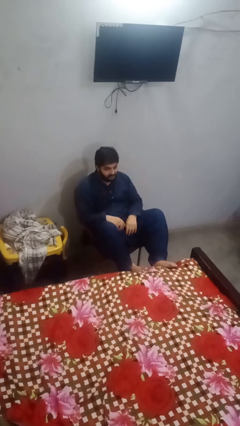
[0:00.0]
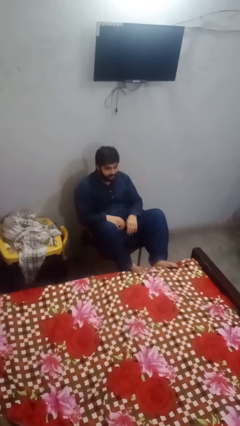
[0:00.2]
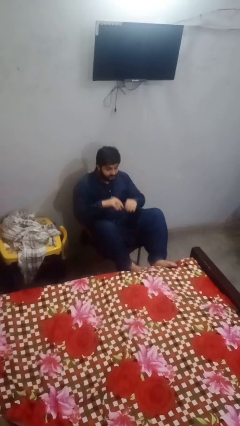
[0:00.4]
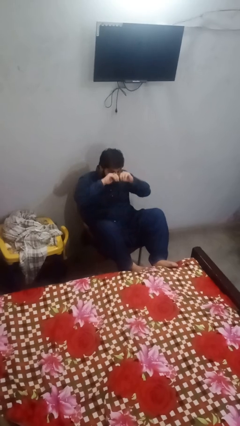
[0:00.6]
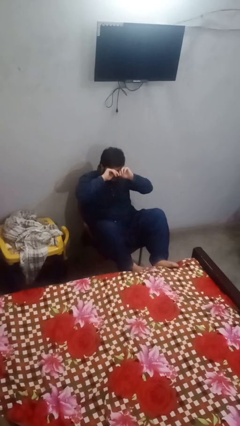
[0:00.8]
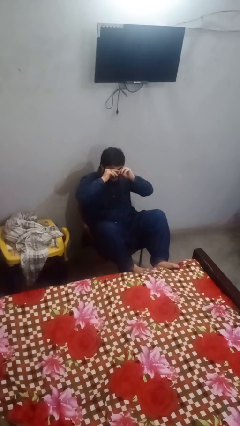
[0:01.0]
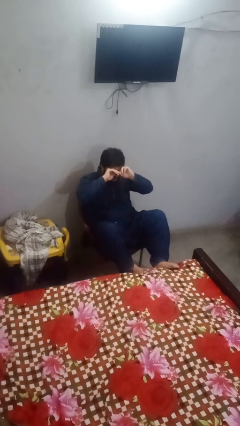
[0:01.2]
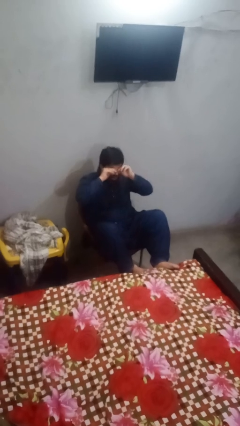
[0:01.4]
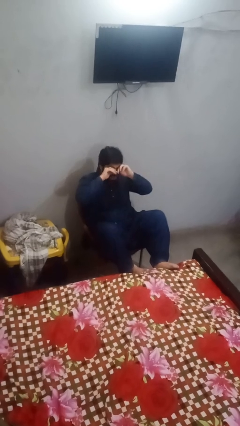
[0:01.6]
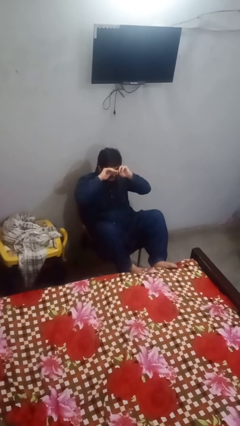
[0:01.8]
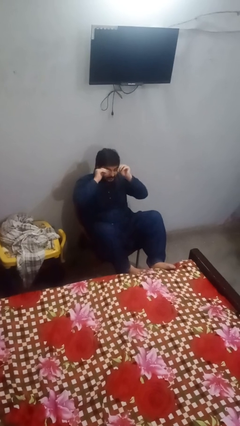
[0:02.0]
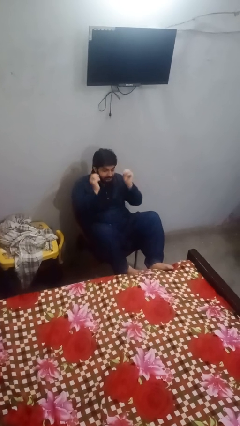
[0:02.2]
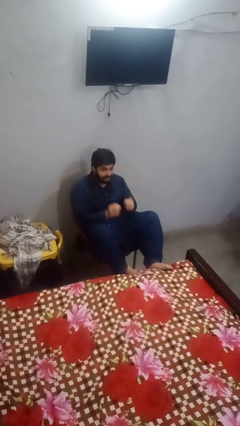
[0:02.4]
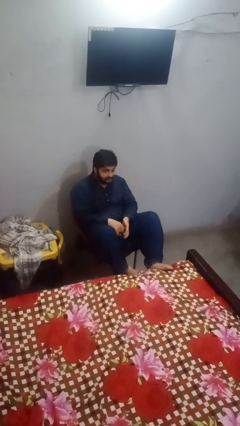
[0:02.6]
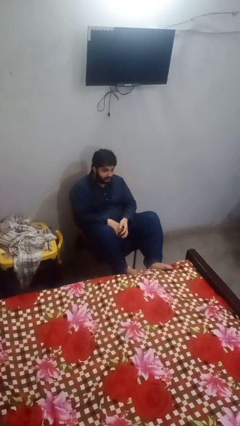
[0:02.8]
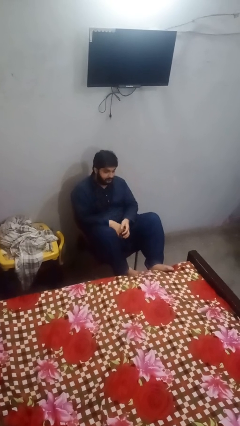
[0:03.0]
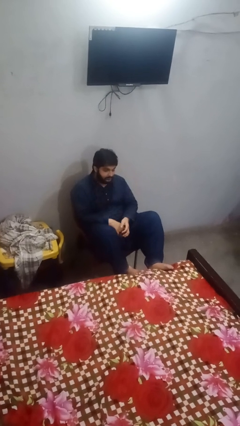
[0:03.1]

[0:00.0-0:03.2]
person rubs eyes

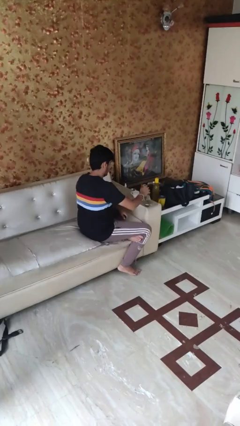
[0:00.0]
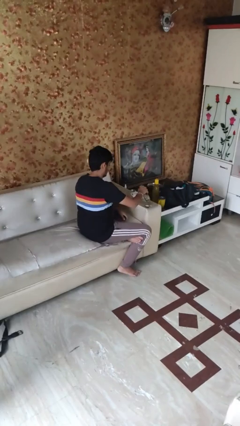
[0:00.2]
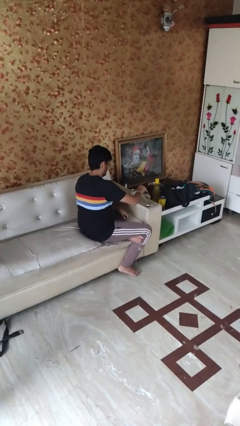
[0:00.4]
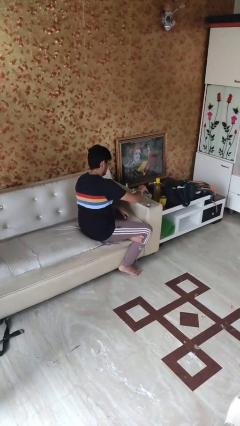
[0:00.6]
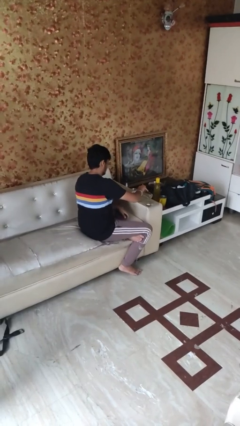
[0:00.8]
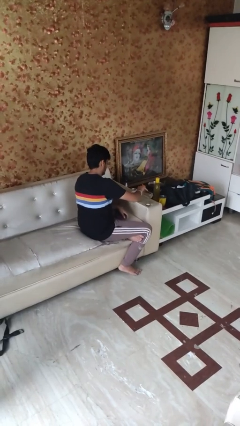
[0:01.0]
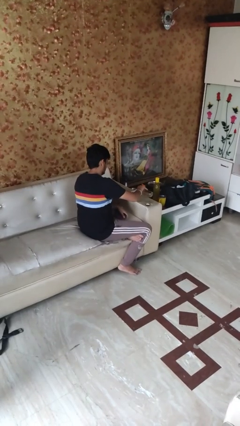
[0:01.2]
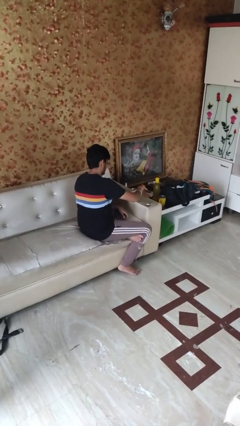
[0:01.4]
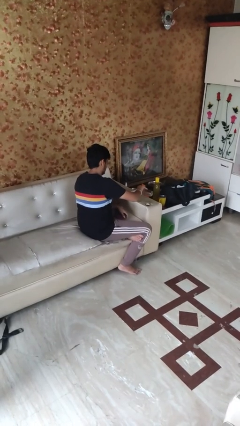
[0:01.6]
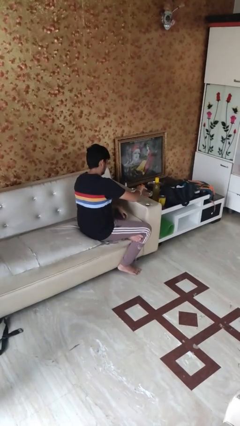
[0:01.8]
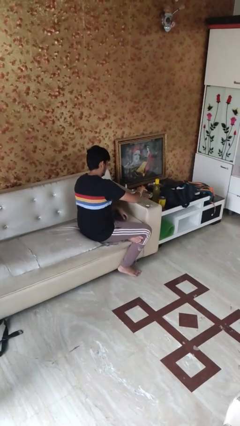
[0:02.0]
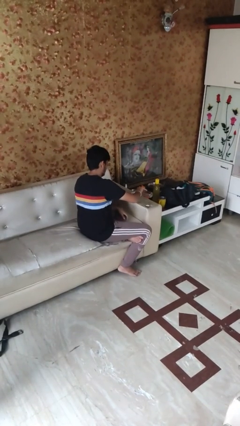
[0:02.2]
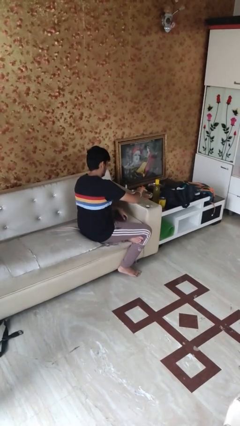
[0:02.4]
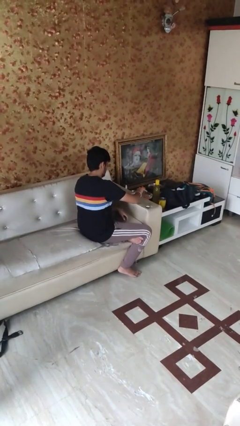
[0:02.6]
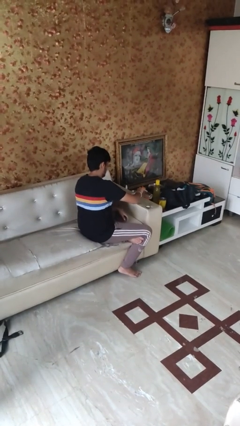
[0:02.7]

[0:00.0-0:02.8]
person pours liquid into cup

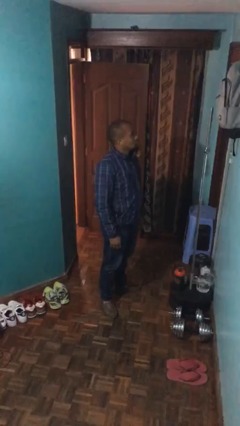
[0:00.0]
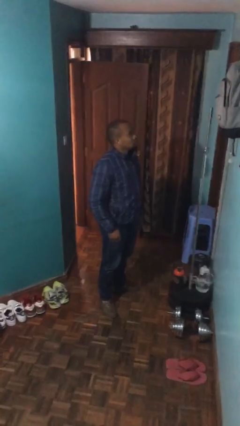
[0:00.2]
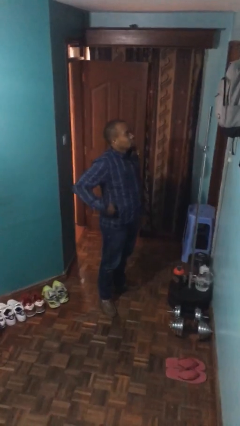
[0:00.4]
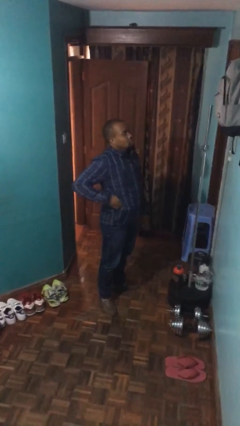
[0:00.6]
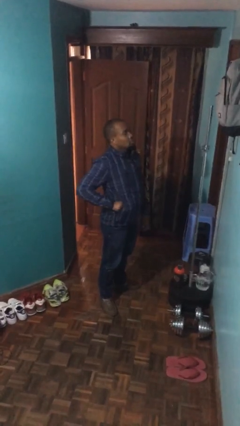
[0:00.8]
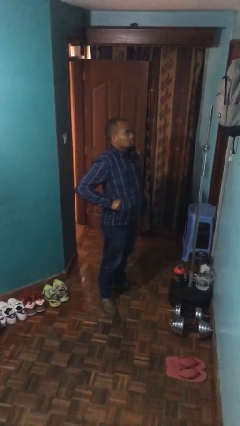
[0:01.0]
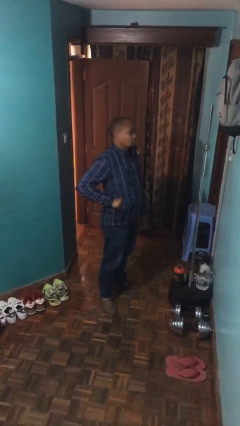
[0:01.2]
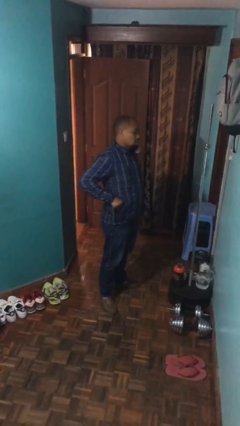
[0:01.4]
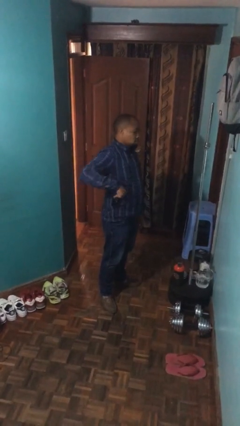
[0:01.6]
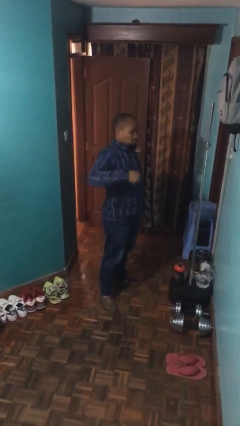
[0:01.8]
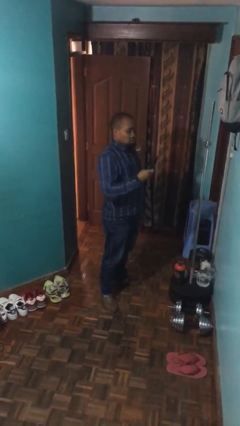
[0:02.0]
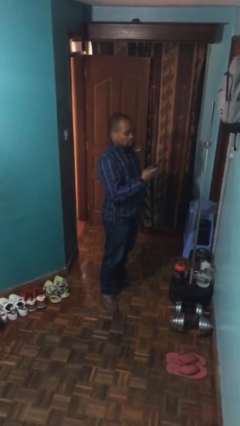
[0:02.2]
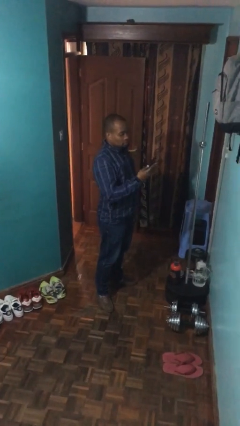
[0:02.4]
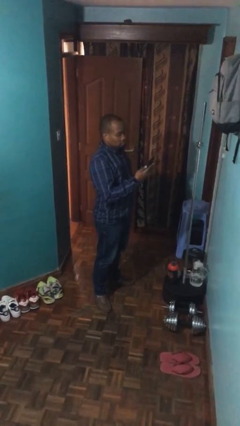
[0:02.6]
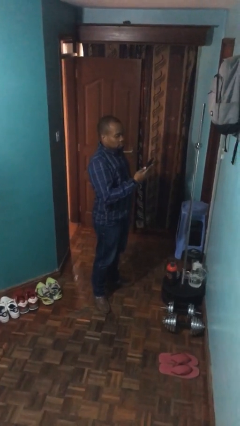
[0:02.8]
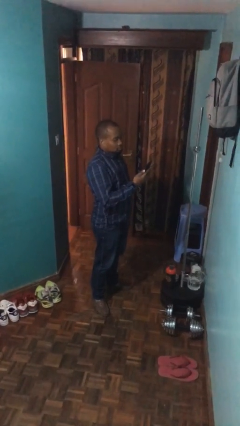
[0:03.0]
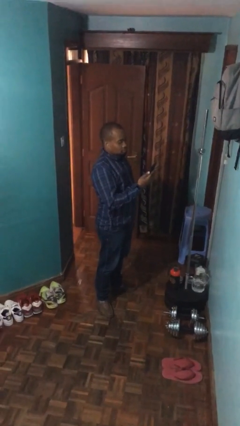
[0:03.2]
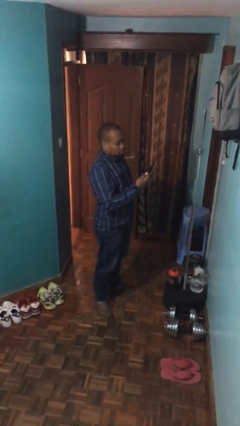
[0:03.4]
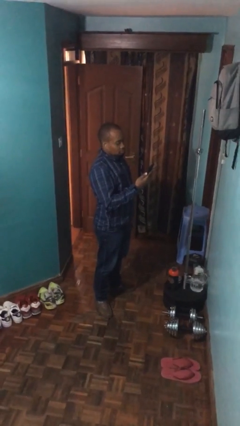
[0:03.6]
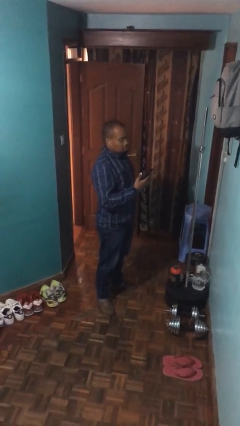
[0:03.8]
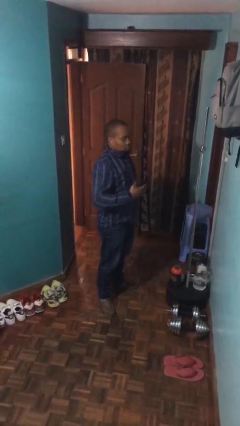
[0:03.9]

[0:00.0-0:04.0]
person takes phone from pocket

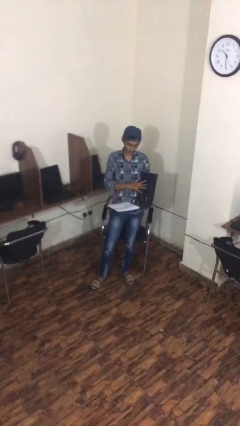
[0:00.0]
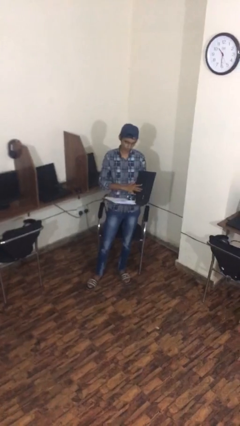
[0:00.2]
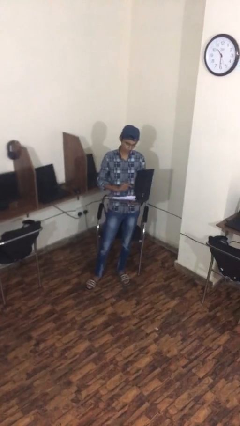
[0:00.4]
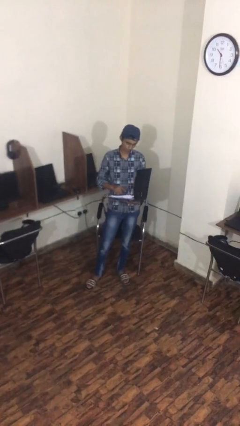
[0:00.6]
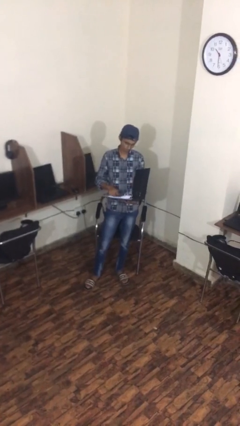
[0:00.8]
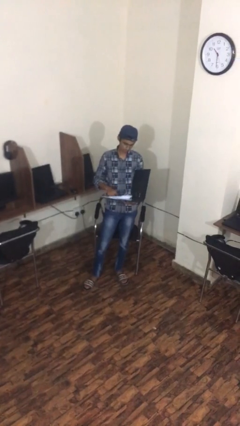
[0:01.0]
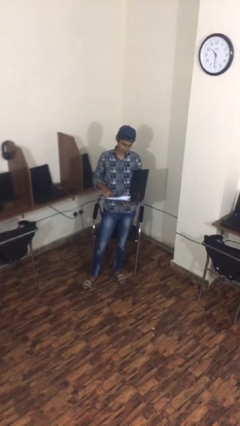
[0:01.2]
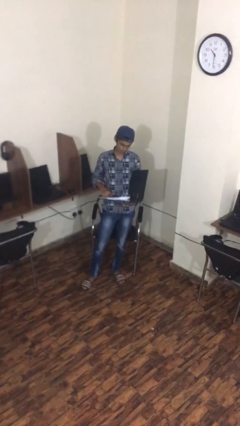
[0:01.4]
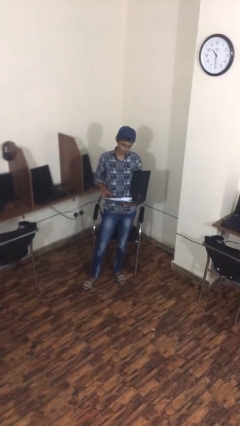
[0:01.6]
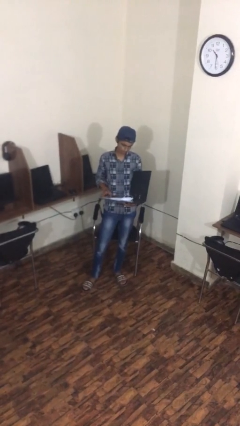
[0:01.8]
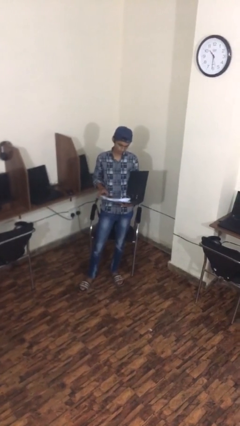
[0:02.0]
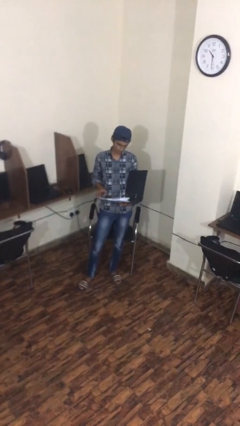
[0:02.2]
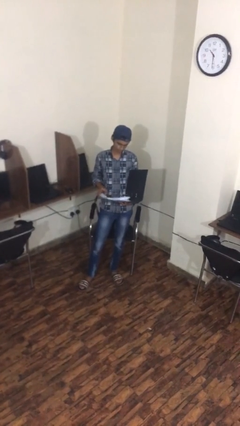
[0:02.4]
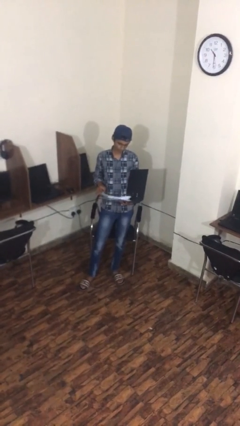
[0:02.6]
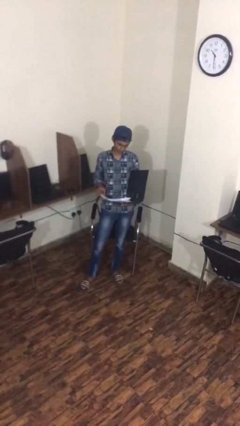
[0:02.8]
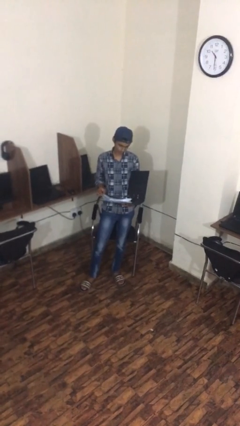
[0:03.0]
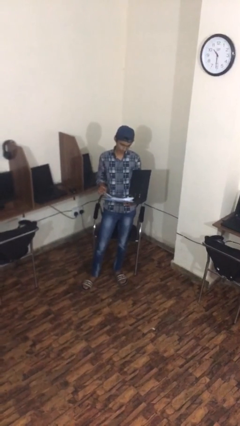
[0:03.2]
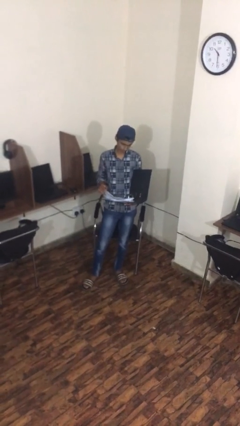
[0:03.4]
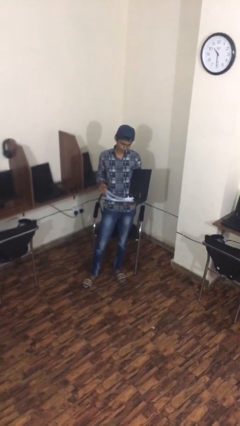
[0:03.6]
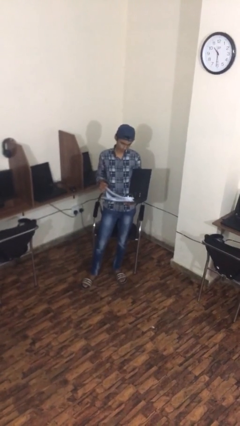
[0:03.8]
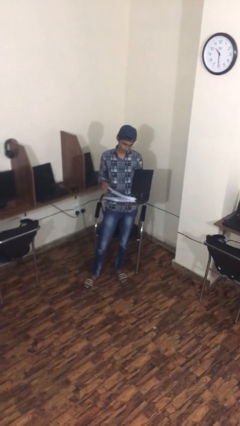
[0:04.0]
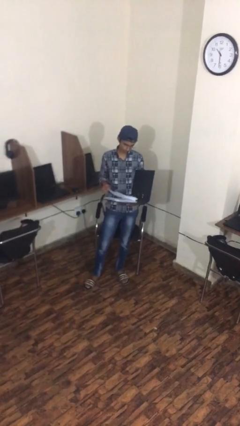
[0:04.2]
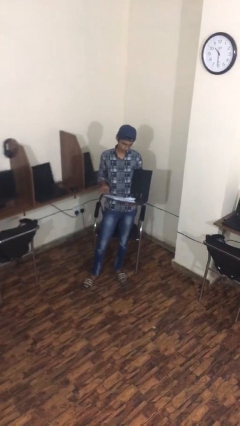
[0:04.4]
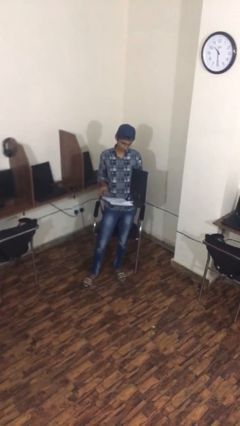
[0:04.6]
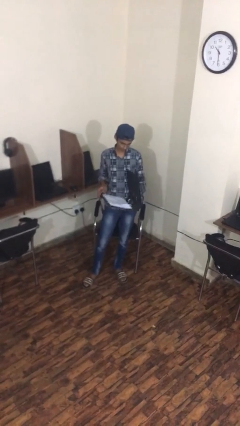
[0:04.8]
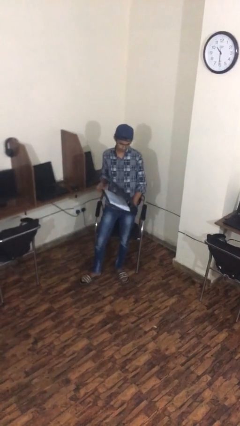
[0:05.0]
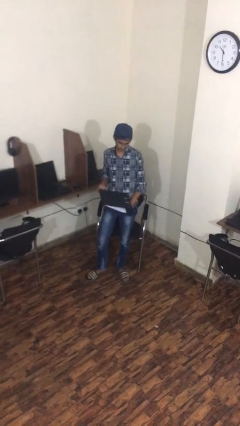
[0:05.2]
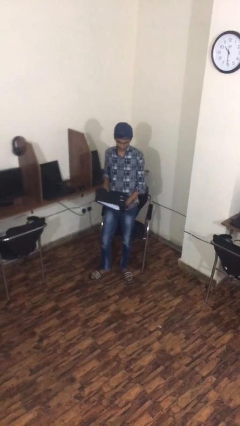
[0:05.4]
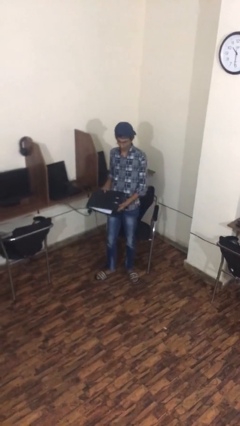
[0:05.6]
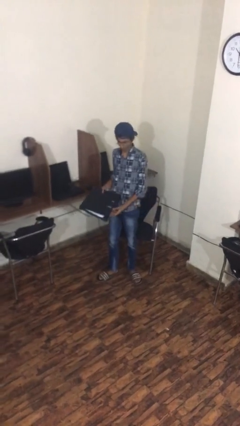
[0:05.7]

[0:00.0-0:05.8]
person reads document

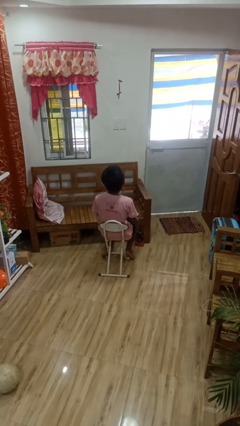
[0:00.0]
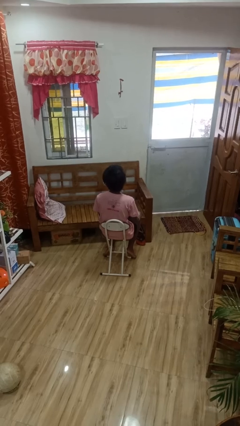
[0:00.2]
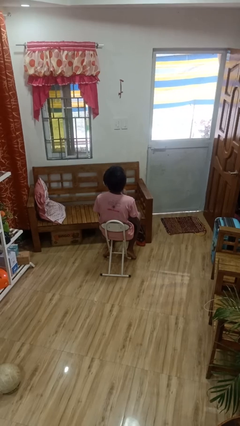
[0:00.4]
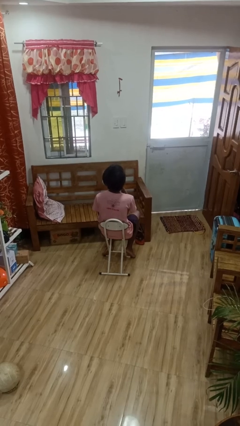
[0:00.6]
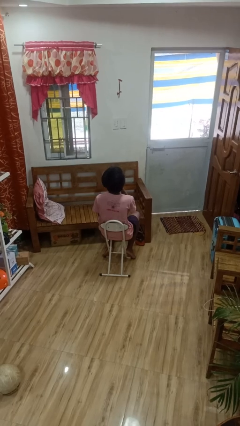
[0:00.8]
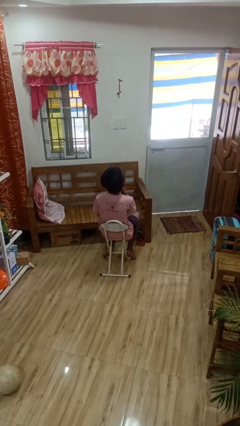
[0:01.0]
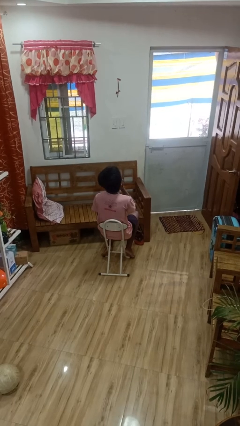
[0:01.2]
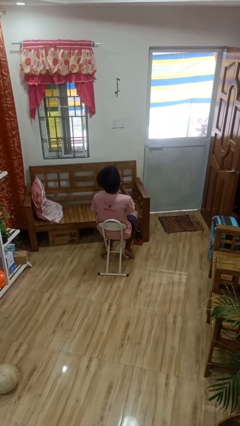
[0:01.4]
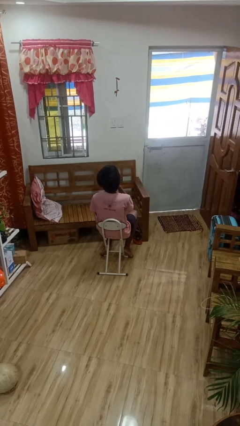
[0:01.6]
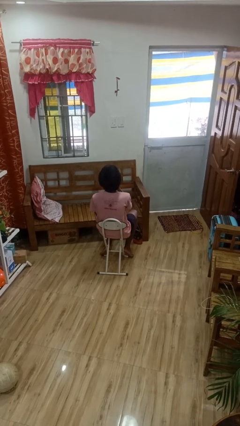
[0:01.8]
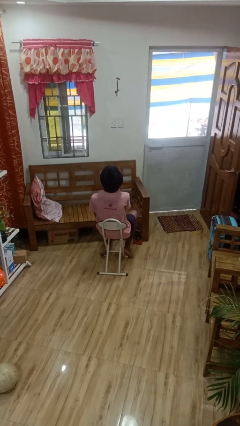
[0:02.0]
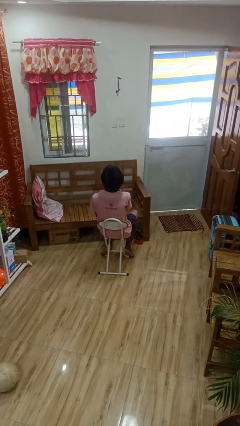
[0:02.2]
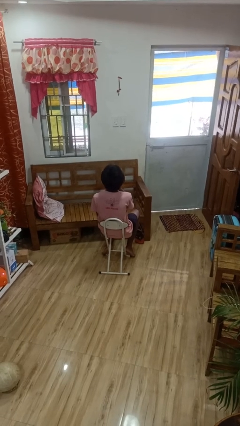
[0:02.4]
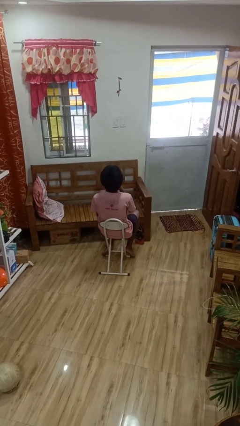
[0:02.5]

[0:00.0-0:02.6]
person strokes chin
